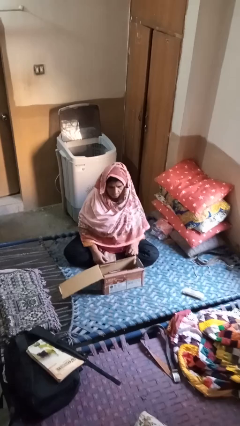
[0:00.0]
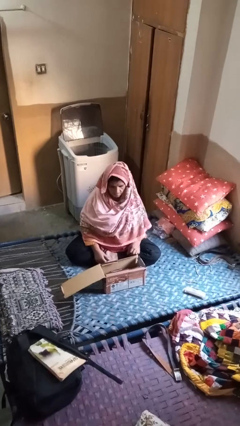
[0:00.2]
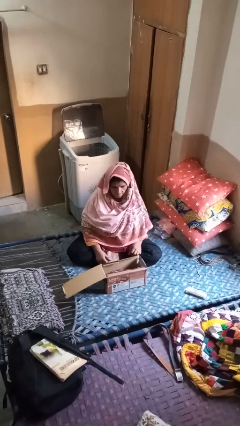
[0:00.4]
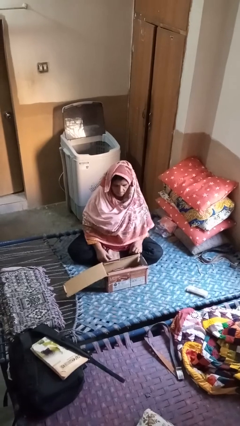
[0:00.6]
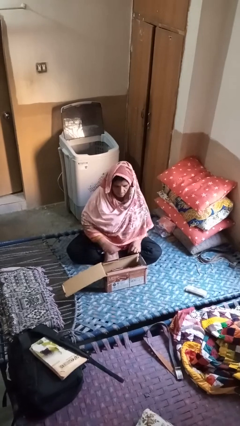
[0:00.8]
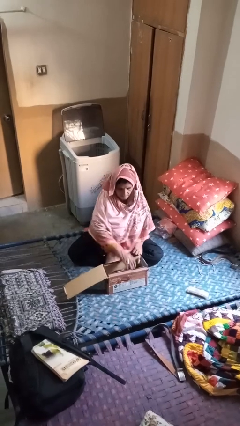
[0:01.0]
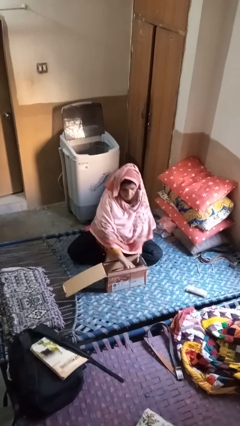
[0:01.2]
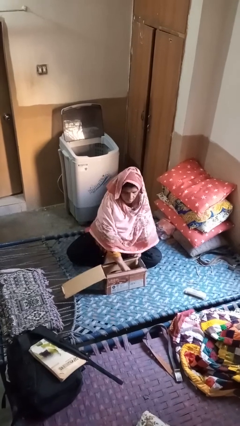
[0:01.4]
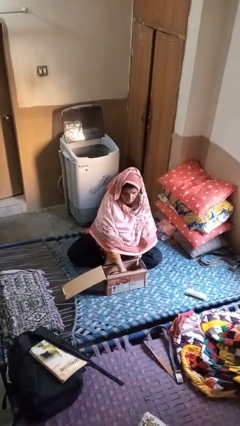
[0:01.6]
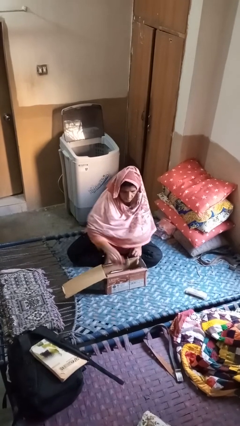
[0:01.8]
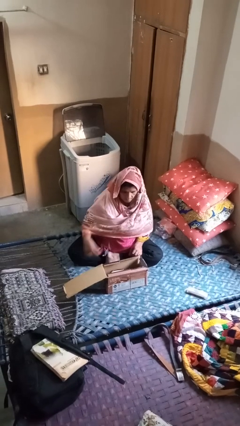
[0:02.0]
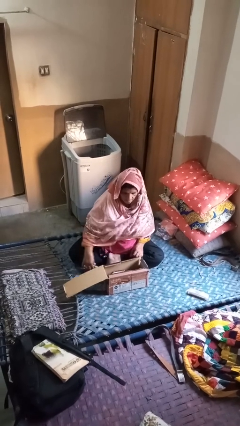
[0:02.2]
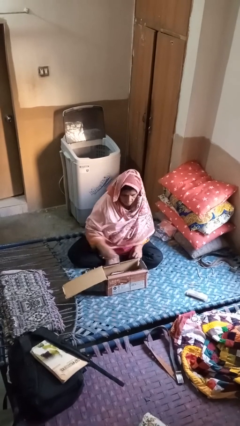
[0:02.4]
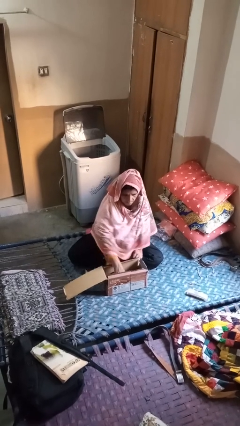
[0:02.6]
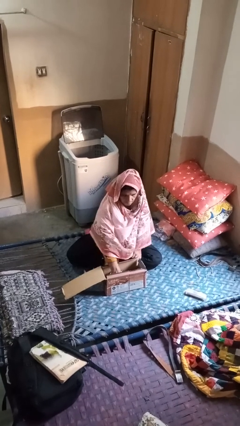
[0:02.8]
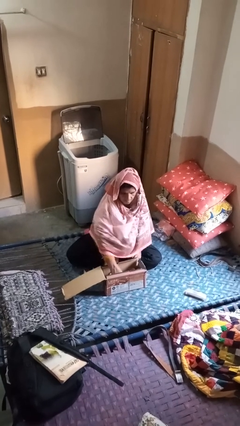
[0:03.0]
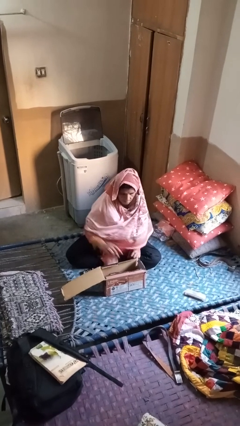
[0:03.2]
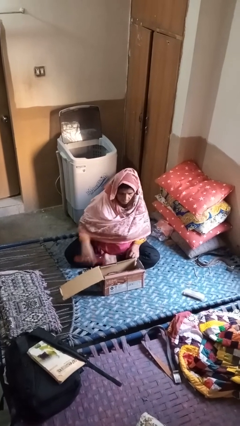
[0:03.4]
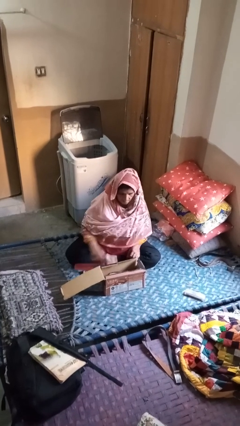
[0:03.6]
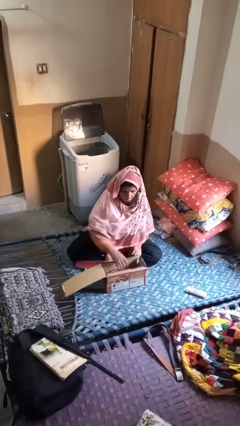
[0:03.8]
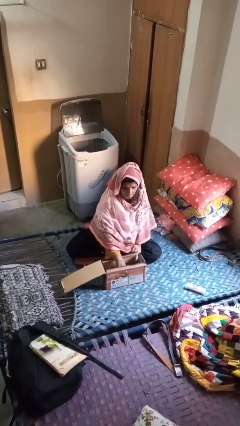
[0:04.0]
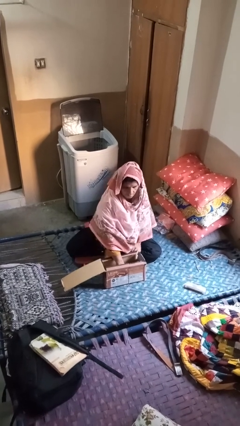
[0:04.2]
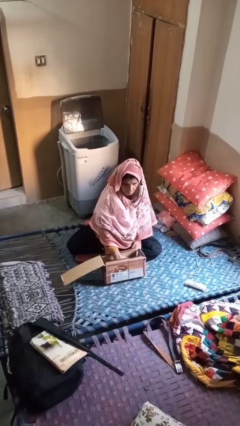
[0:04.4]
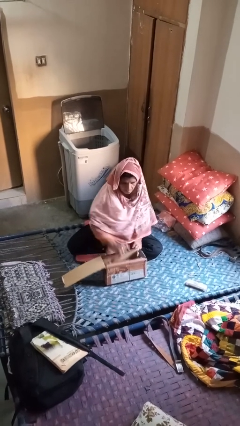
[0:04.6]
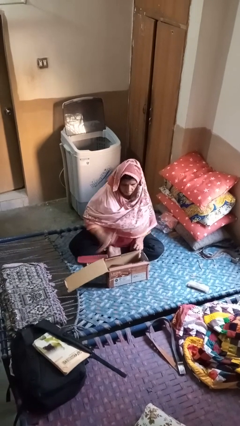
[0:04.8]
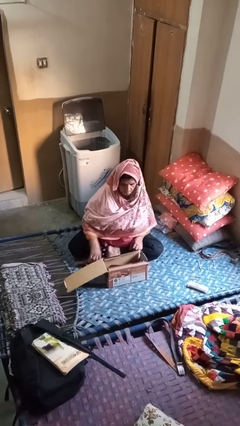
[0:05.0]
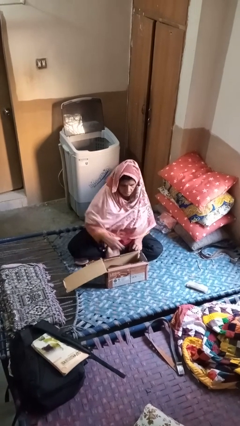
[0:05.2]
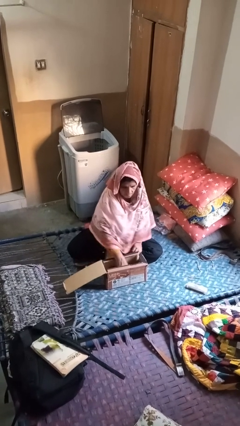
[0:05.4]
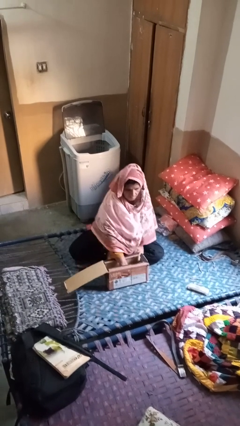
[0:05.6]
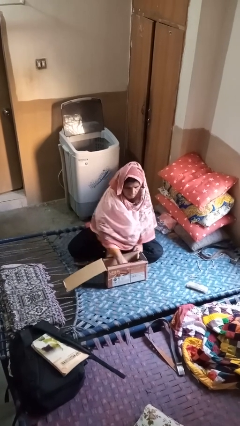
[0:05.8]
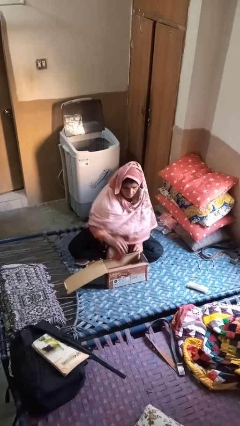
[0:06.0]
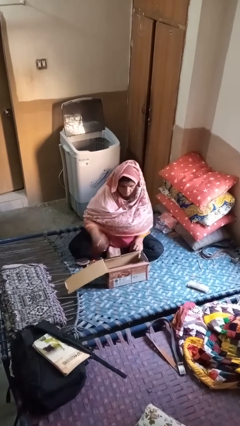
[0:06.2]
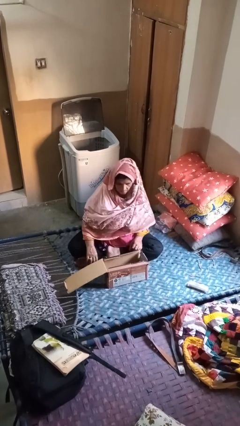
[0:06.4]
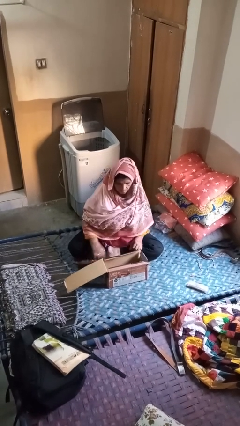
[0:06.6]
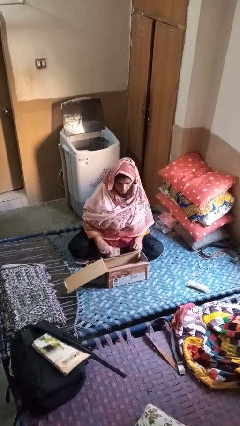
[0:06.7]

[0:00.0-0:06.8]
person takes object from box

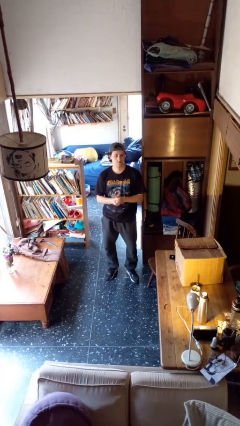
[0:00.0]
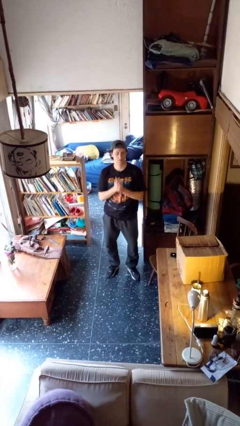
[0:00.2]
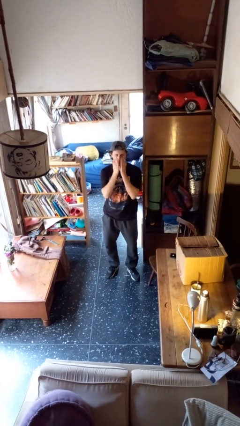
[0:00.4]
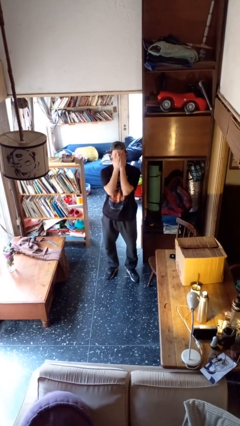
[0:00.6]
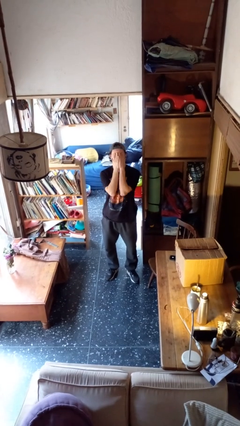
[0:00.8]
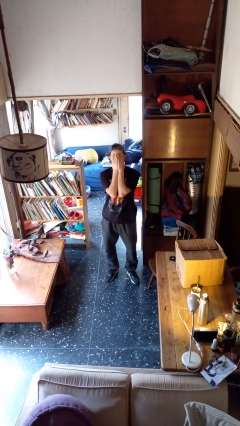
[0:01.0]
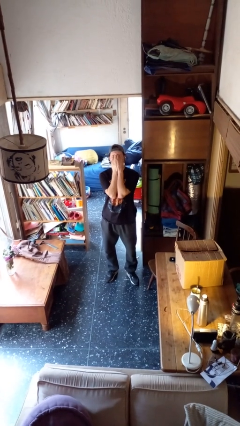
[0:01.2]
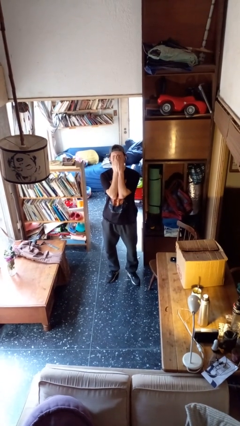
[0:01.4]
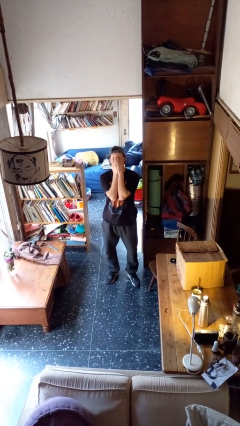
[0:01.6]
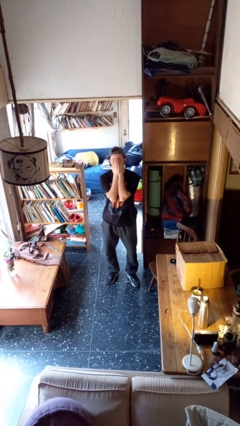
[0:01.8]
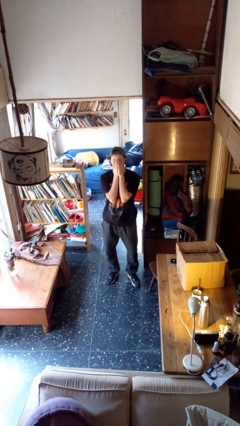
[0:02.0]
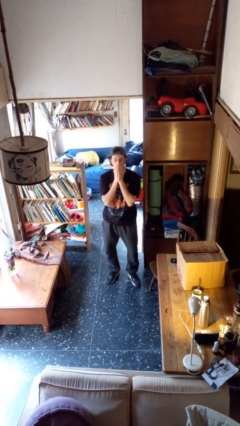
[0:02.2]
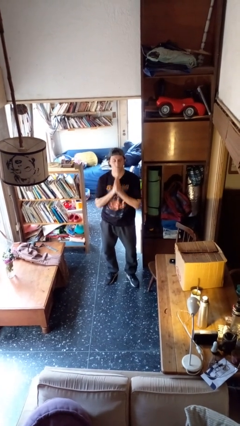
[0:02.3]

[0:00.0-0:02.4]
person covers face with hands

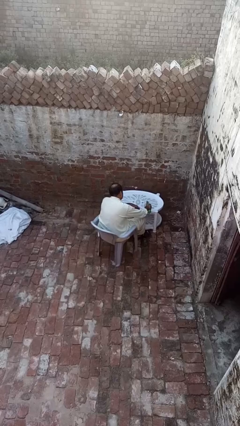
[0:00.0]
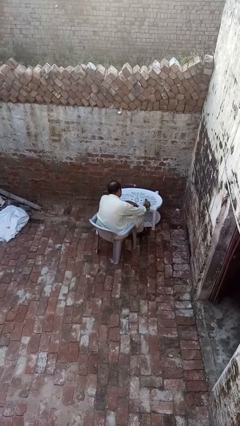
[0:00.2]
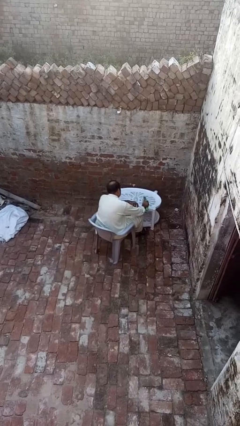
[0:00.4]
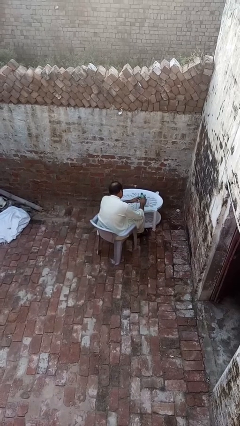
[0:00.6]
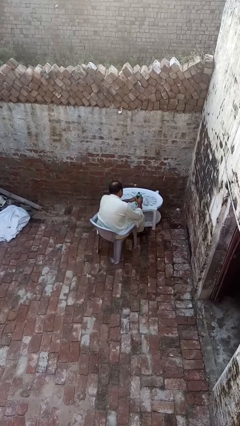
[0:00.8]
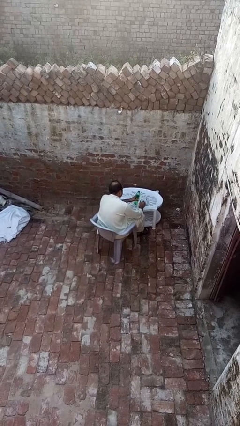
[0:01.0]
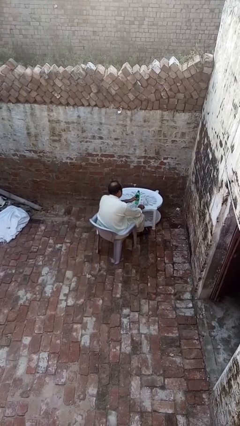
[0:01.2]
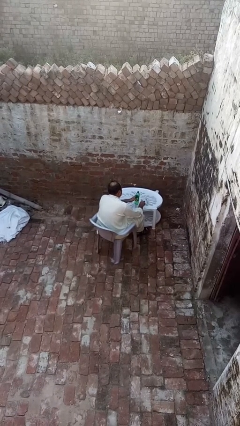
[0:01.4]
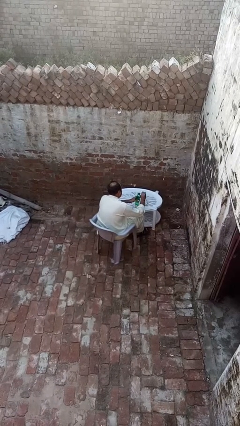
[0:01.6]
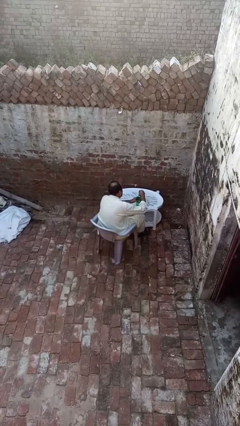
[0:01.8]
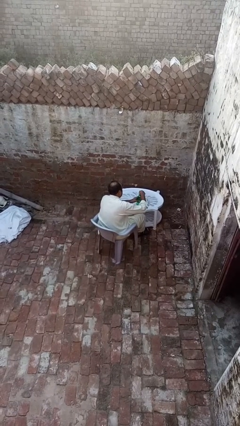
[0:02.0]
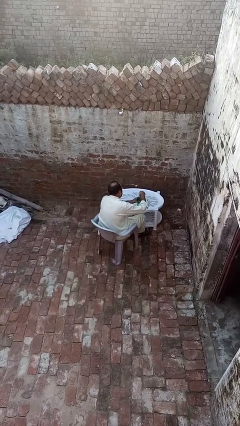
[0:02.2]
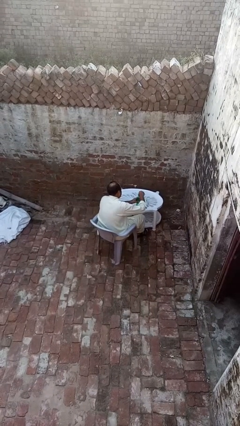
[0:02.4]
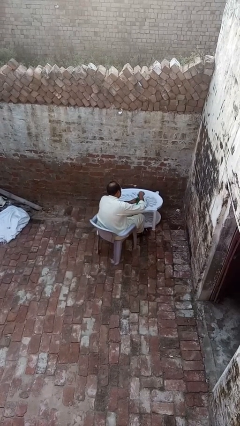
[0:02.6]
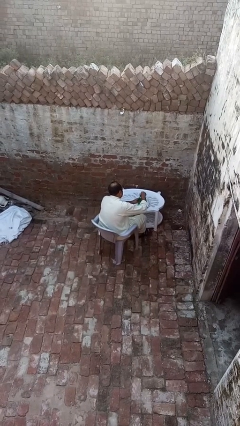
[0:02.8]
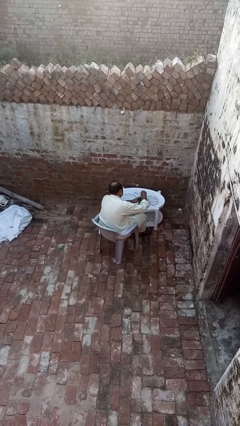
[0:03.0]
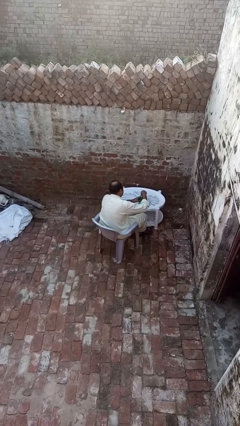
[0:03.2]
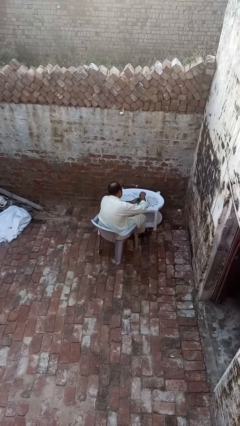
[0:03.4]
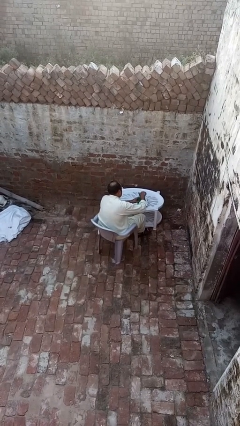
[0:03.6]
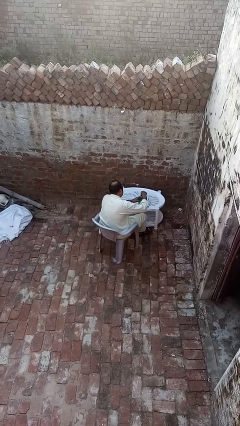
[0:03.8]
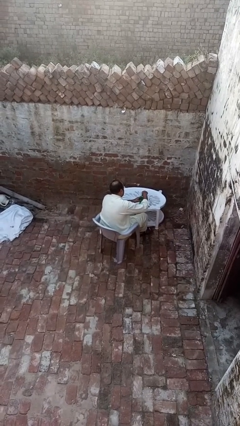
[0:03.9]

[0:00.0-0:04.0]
person screws lid to bottle

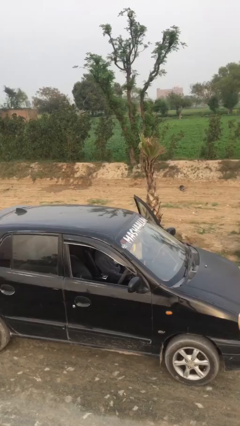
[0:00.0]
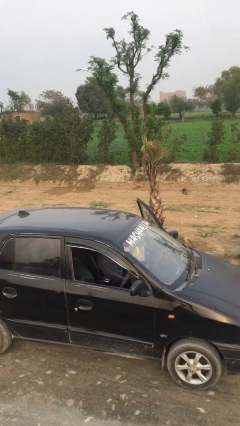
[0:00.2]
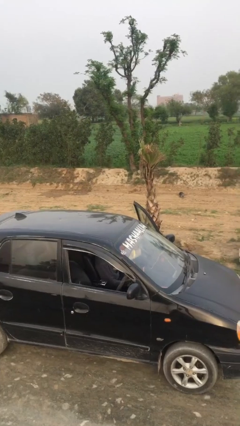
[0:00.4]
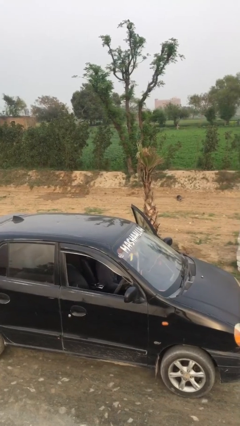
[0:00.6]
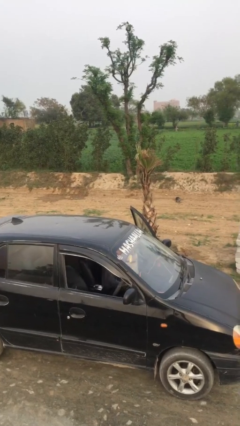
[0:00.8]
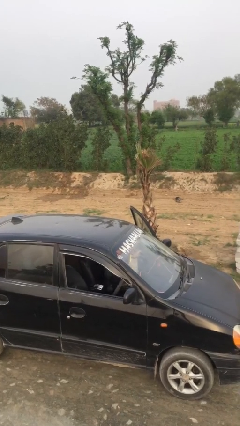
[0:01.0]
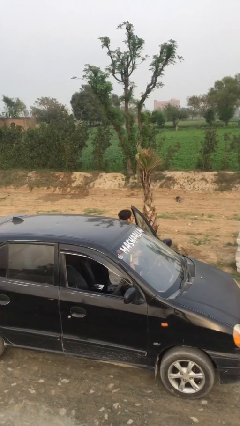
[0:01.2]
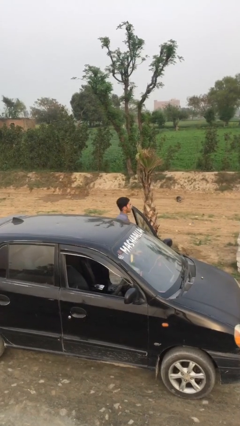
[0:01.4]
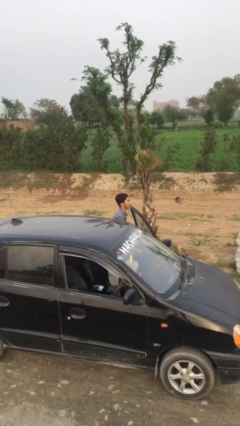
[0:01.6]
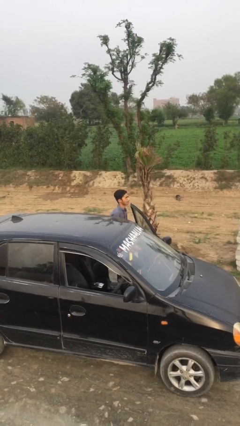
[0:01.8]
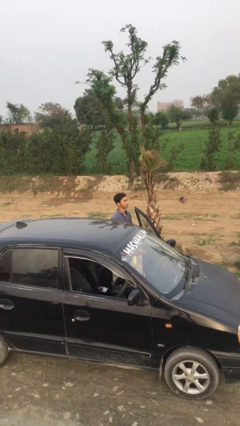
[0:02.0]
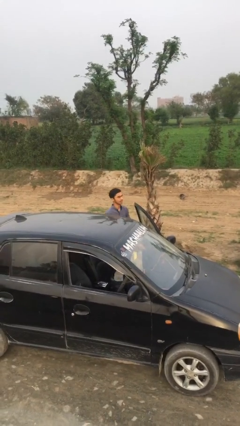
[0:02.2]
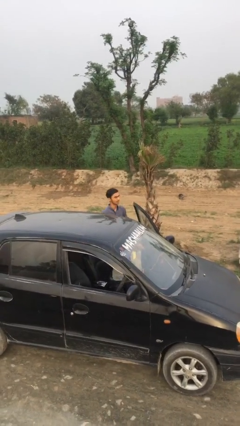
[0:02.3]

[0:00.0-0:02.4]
person exits car

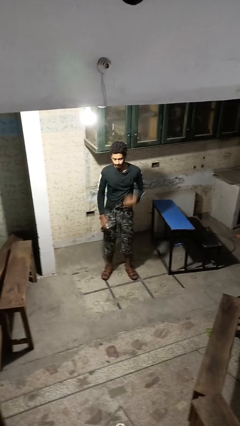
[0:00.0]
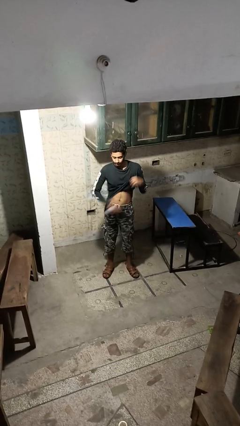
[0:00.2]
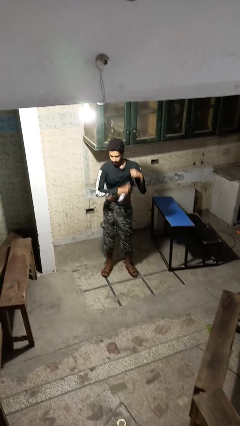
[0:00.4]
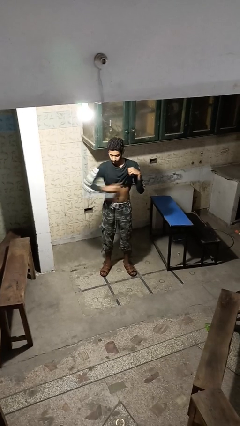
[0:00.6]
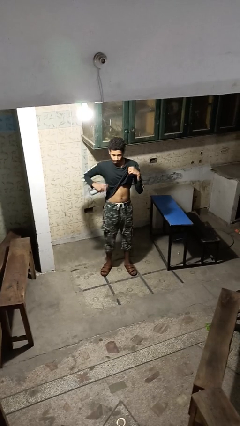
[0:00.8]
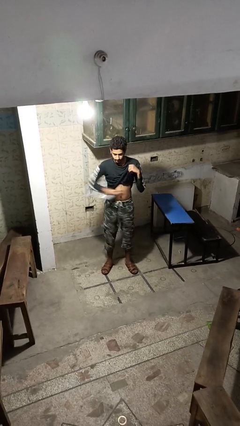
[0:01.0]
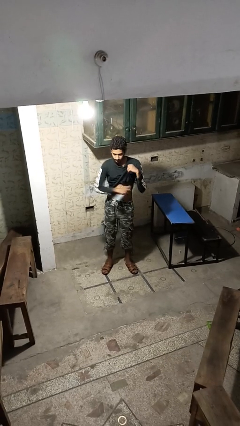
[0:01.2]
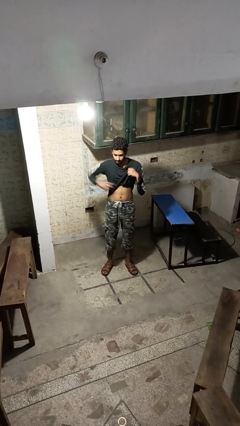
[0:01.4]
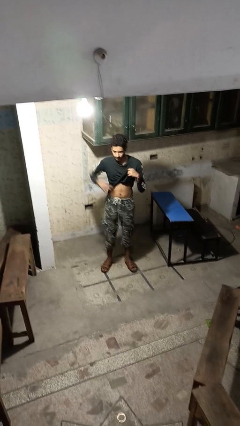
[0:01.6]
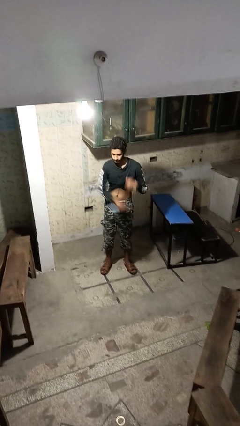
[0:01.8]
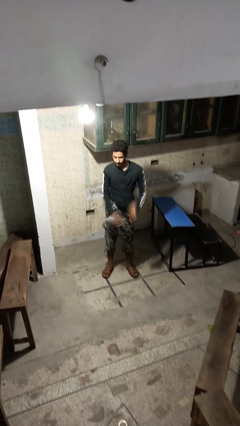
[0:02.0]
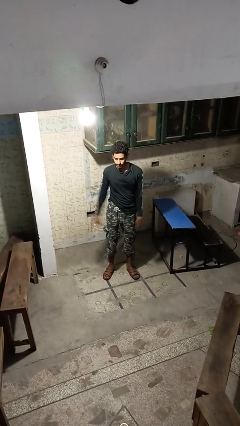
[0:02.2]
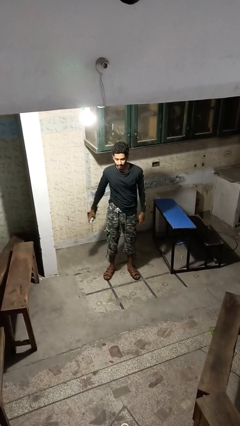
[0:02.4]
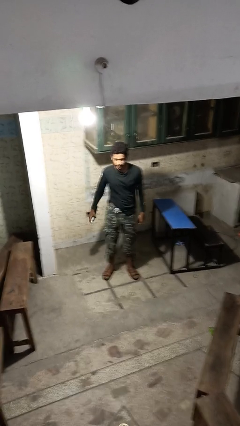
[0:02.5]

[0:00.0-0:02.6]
person applies deodorant
